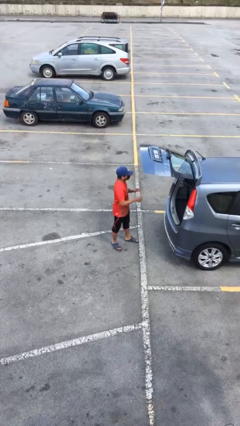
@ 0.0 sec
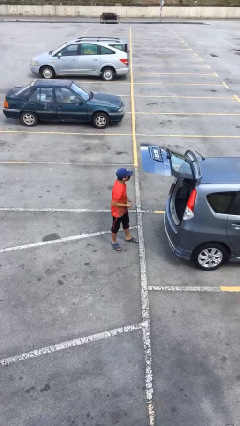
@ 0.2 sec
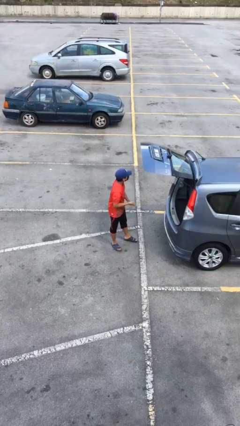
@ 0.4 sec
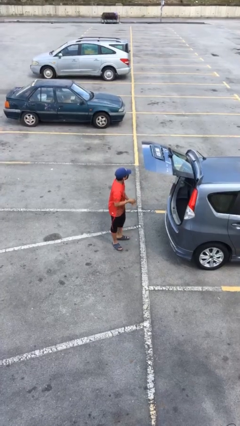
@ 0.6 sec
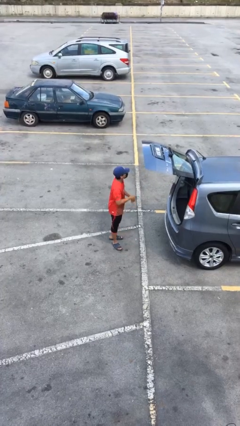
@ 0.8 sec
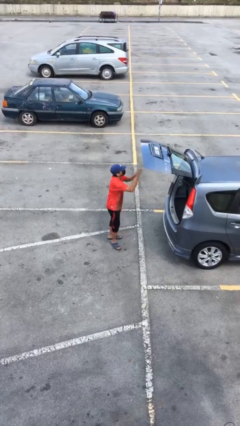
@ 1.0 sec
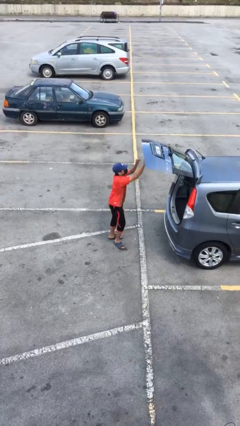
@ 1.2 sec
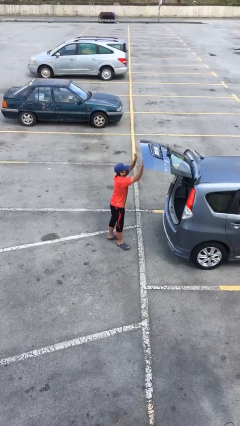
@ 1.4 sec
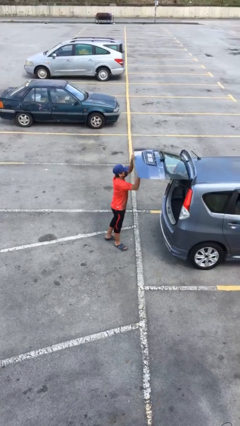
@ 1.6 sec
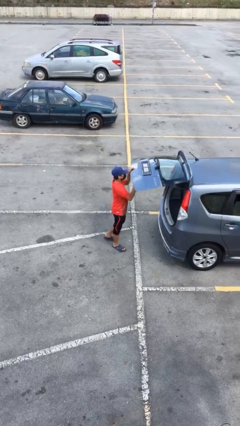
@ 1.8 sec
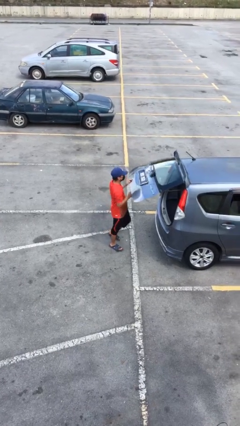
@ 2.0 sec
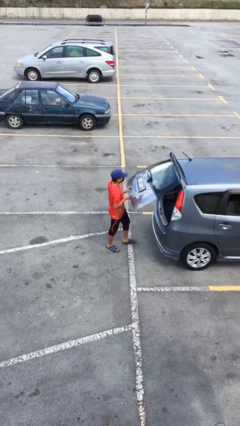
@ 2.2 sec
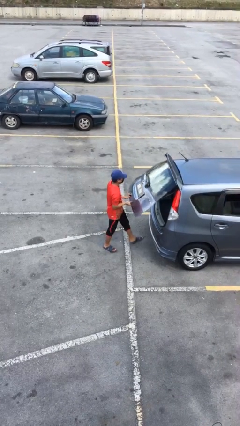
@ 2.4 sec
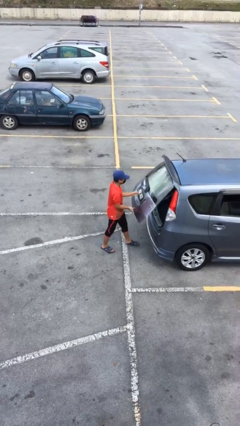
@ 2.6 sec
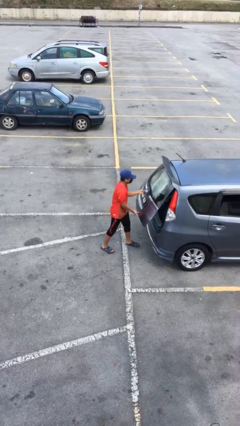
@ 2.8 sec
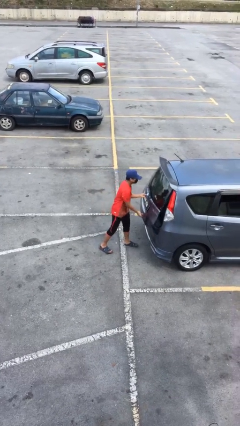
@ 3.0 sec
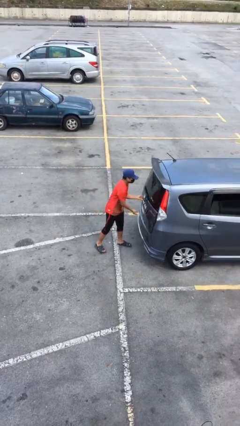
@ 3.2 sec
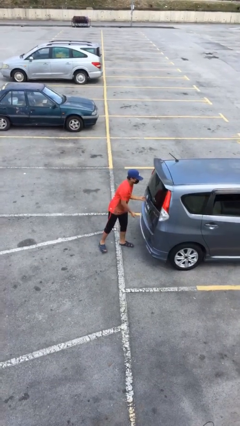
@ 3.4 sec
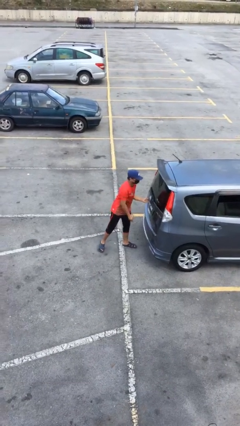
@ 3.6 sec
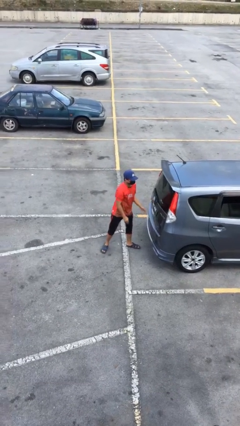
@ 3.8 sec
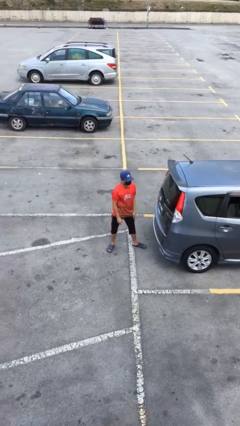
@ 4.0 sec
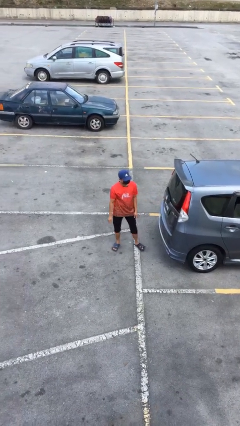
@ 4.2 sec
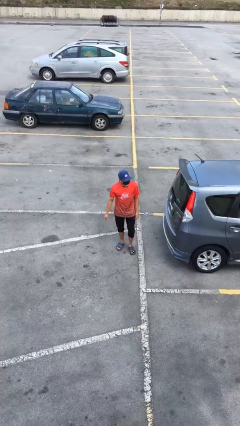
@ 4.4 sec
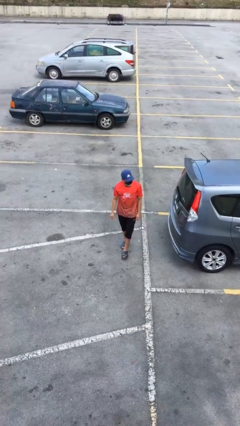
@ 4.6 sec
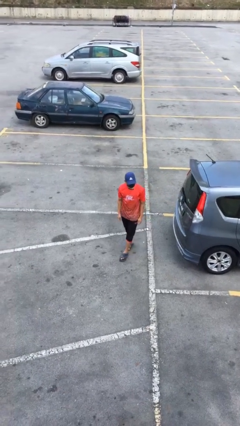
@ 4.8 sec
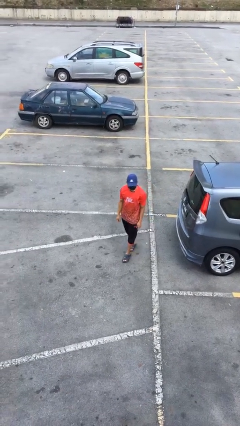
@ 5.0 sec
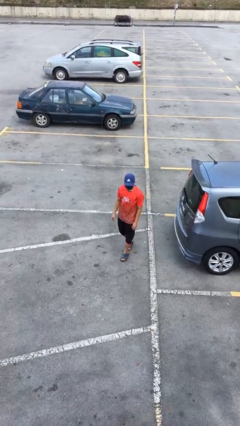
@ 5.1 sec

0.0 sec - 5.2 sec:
person closes car trunk

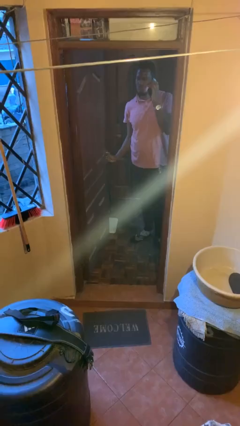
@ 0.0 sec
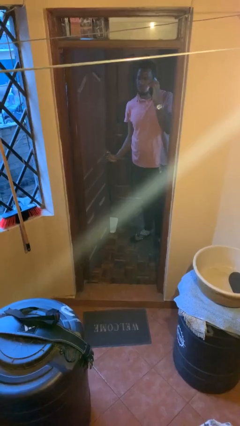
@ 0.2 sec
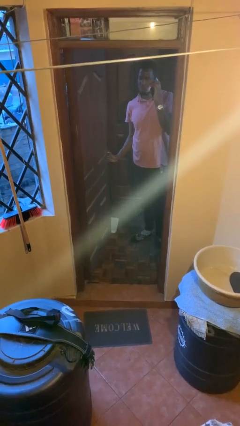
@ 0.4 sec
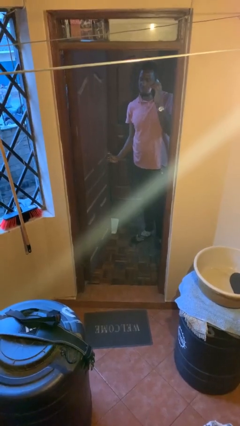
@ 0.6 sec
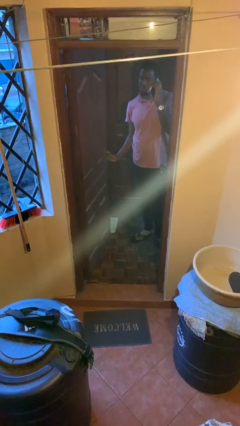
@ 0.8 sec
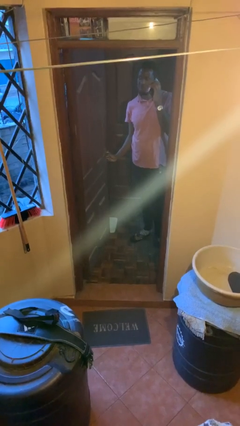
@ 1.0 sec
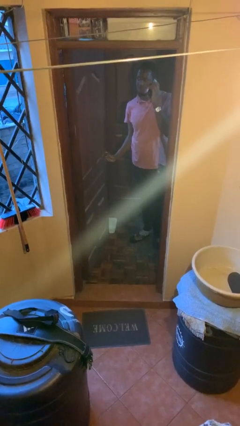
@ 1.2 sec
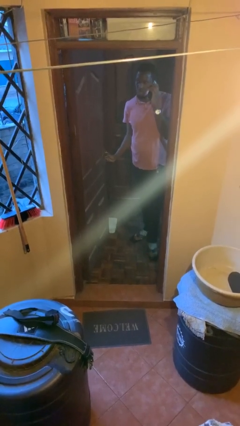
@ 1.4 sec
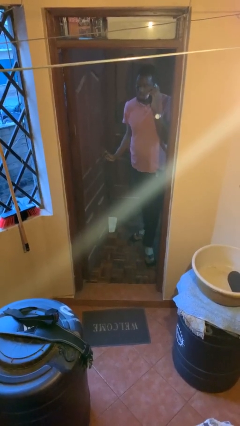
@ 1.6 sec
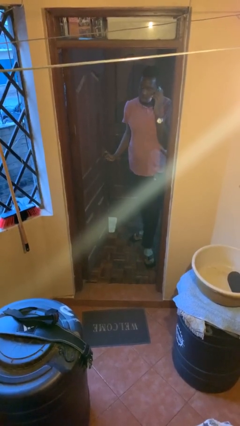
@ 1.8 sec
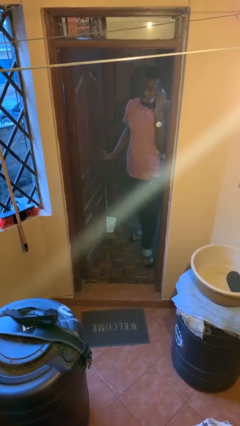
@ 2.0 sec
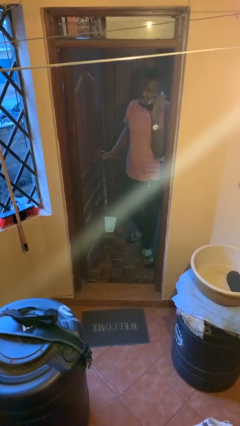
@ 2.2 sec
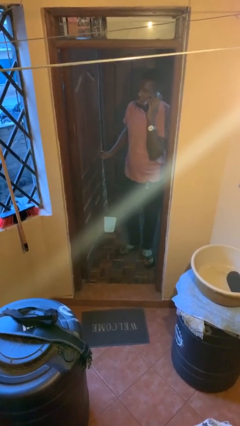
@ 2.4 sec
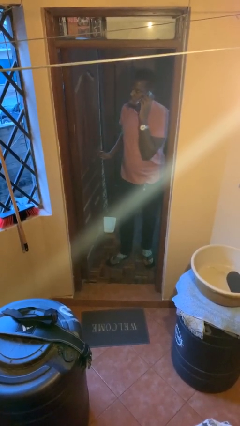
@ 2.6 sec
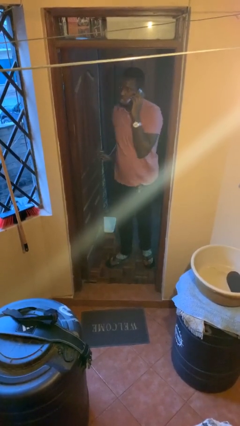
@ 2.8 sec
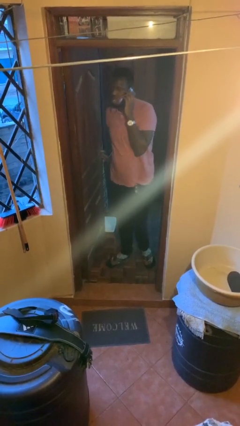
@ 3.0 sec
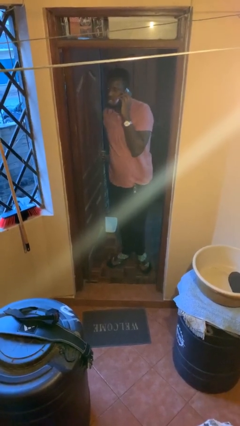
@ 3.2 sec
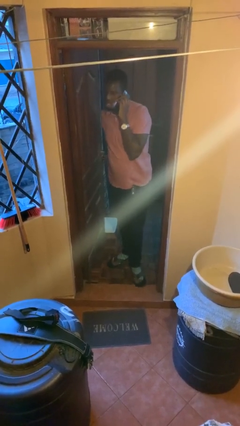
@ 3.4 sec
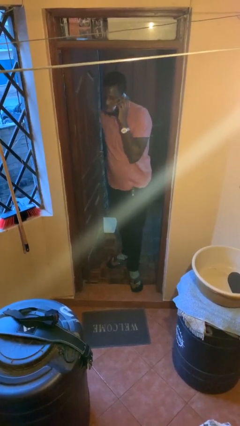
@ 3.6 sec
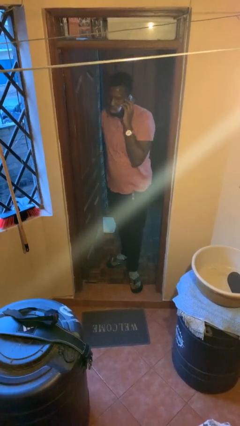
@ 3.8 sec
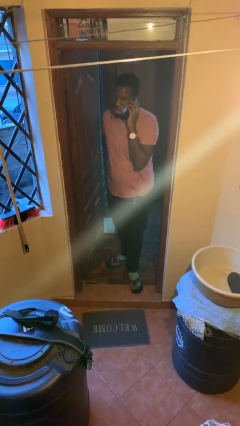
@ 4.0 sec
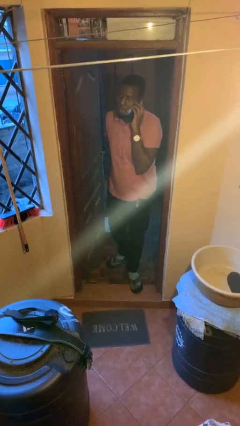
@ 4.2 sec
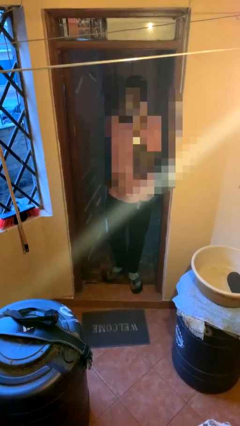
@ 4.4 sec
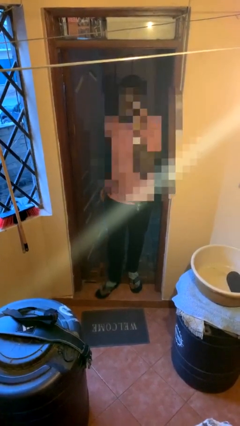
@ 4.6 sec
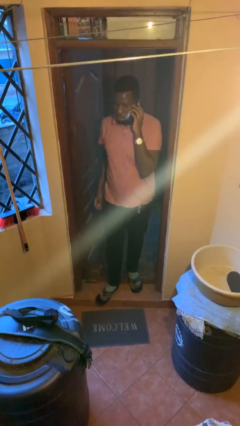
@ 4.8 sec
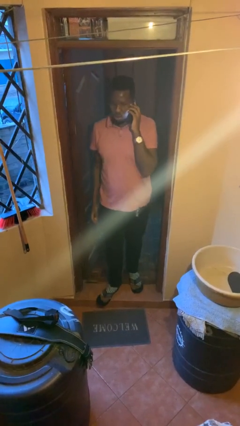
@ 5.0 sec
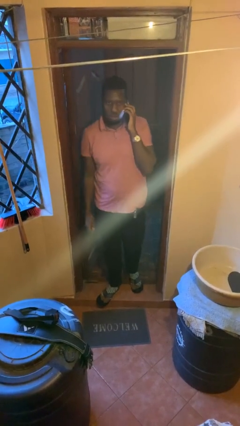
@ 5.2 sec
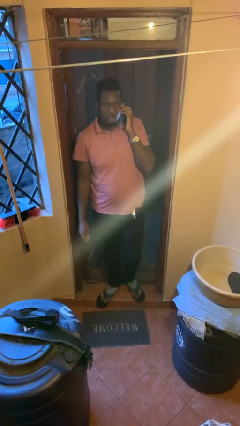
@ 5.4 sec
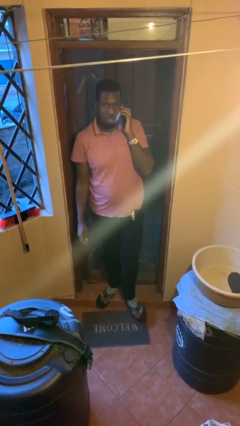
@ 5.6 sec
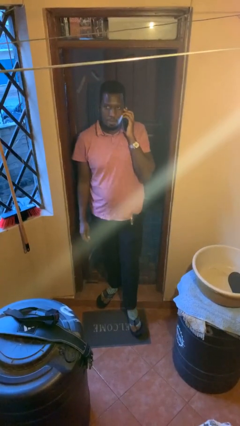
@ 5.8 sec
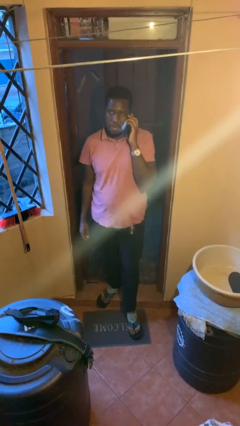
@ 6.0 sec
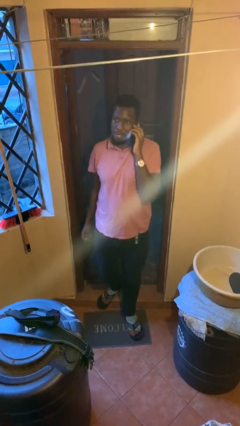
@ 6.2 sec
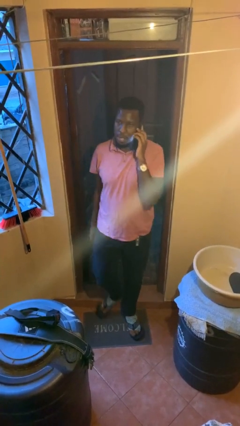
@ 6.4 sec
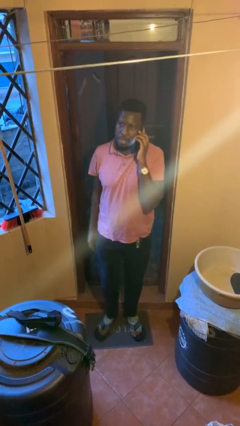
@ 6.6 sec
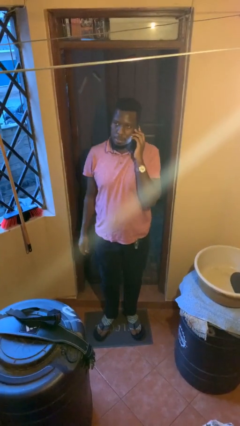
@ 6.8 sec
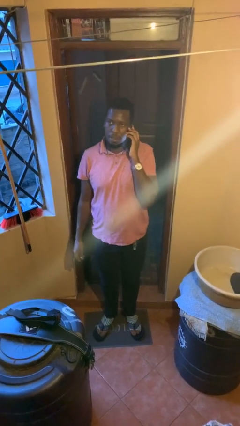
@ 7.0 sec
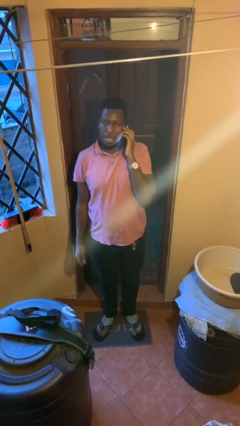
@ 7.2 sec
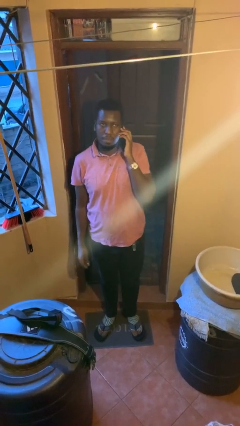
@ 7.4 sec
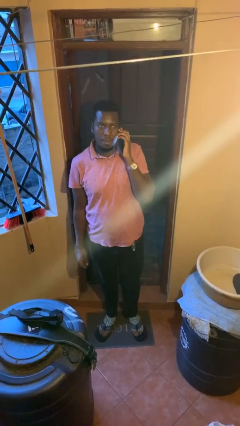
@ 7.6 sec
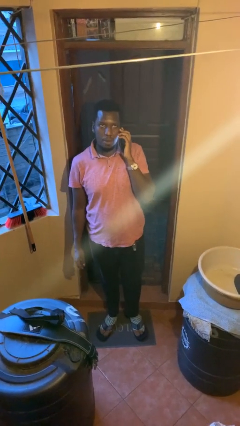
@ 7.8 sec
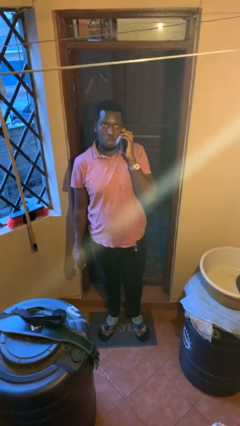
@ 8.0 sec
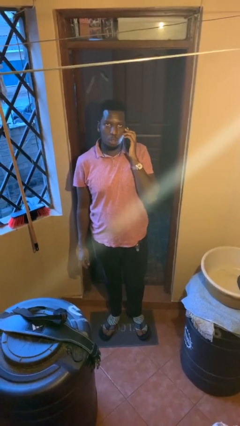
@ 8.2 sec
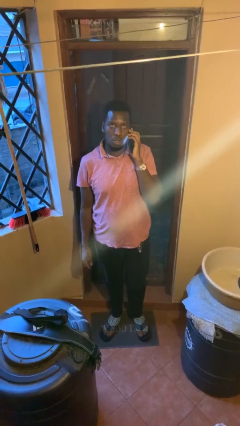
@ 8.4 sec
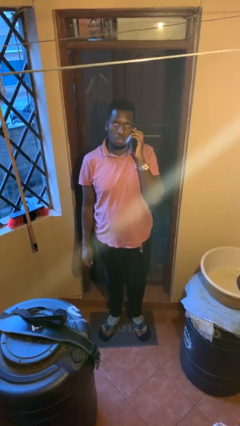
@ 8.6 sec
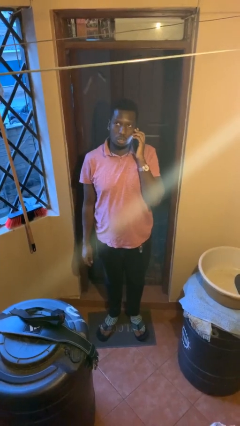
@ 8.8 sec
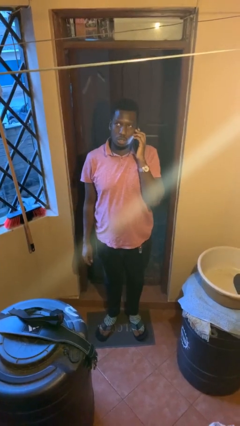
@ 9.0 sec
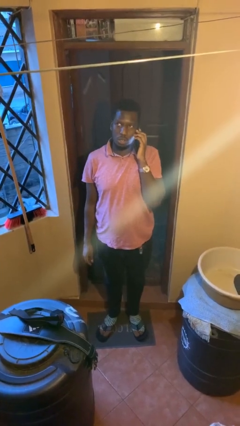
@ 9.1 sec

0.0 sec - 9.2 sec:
person enters scene through structure

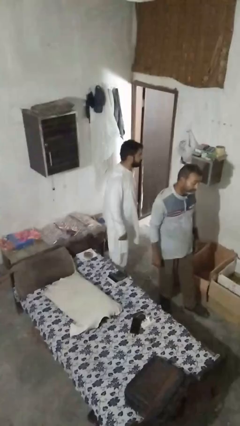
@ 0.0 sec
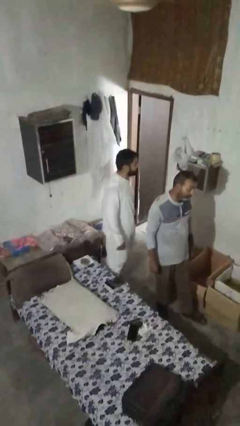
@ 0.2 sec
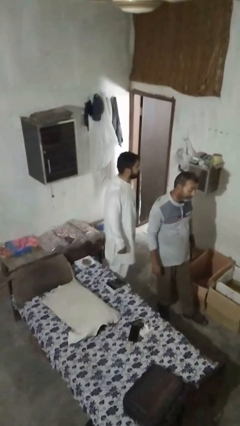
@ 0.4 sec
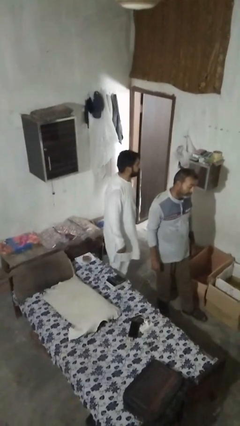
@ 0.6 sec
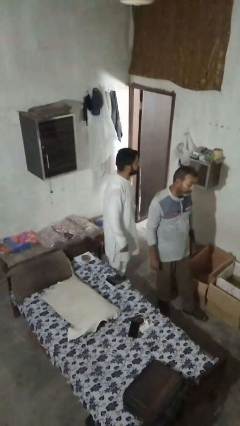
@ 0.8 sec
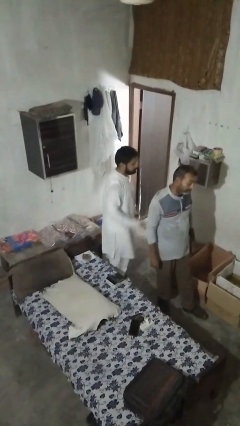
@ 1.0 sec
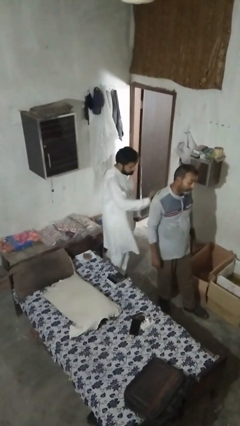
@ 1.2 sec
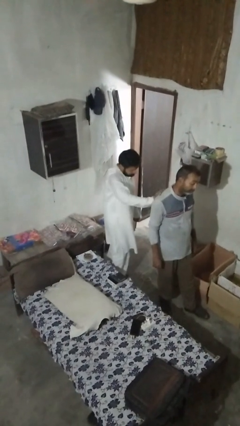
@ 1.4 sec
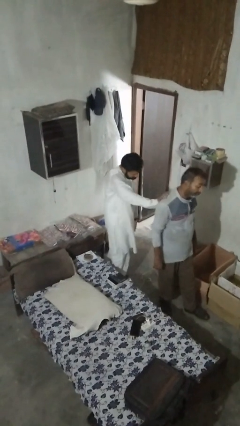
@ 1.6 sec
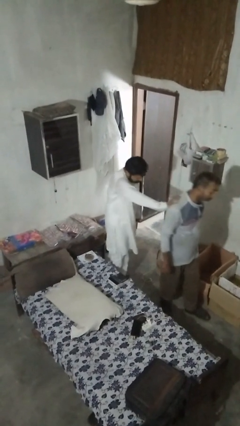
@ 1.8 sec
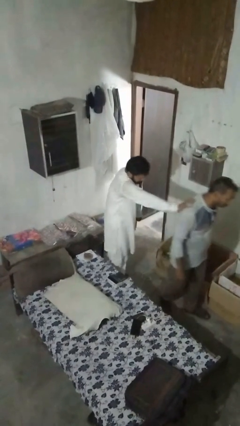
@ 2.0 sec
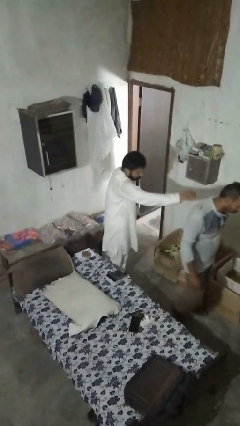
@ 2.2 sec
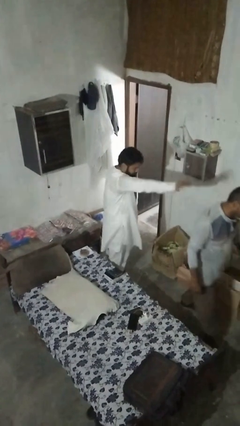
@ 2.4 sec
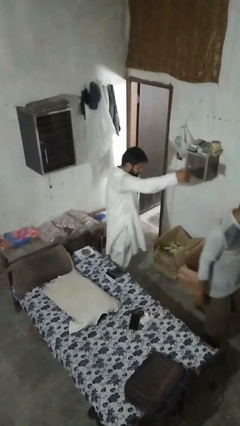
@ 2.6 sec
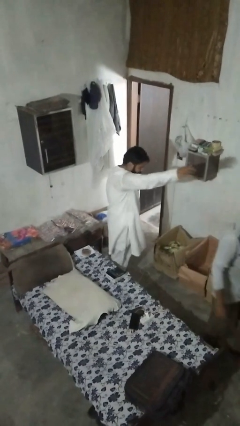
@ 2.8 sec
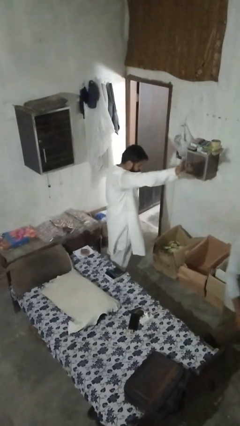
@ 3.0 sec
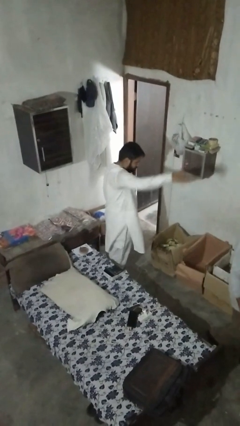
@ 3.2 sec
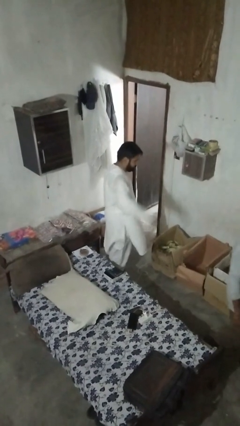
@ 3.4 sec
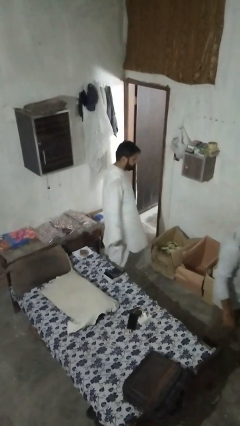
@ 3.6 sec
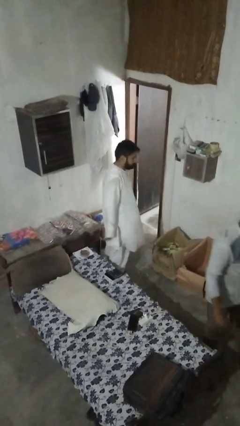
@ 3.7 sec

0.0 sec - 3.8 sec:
person shoves person
